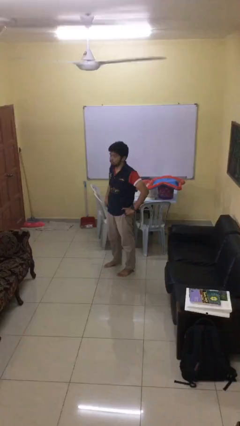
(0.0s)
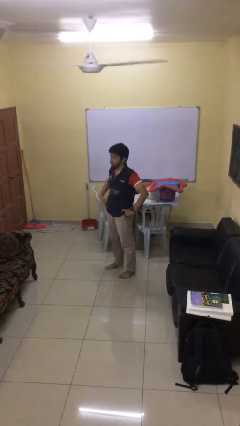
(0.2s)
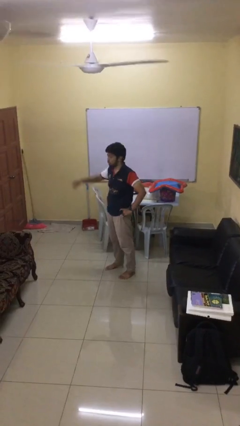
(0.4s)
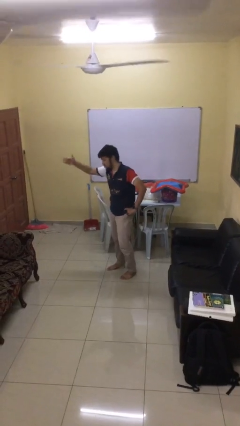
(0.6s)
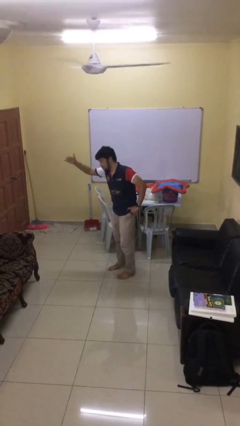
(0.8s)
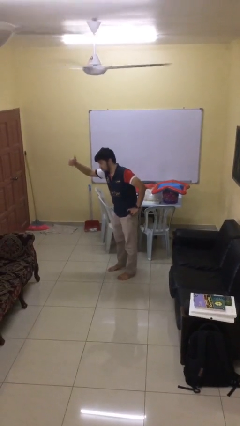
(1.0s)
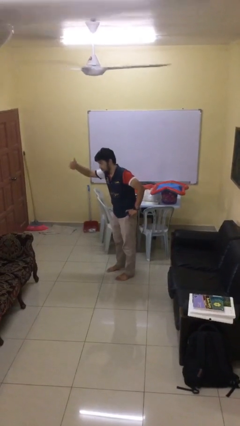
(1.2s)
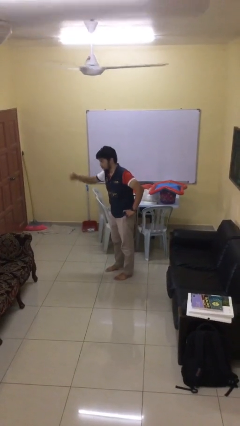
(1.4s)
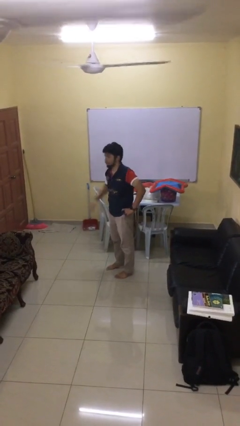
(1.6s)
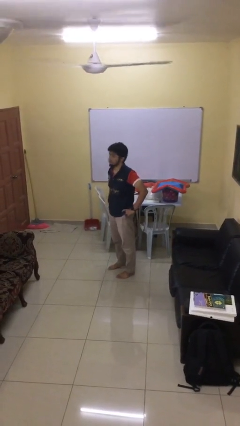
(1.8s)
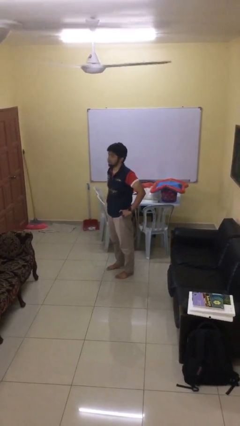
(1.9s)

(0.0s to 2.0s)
person gestures come here

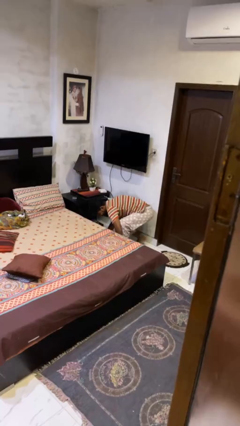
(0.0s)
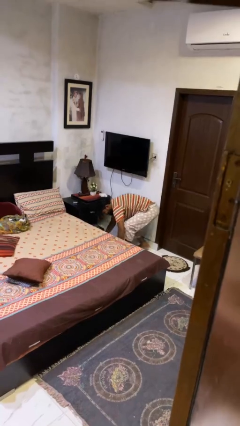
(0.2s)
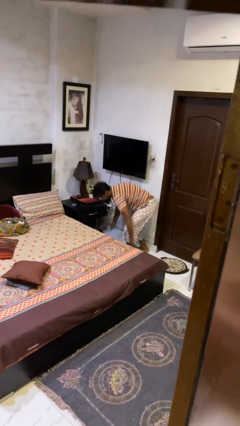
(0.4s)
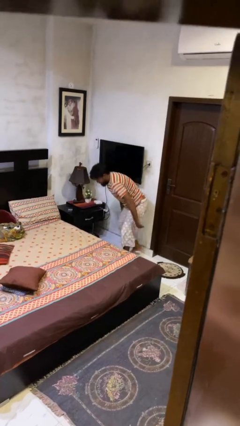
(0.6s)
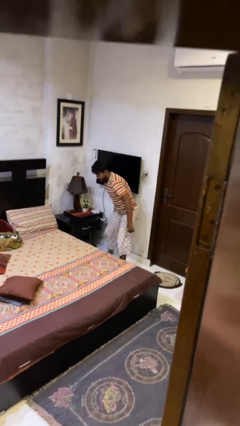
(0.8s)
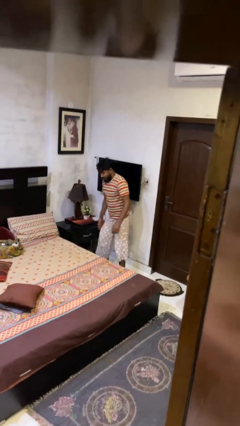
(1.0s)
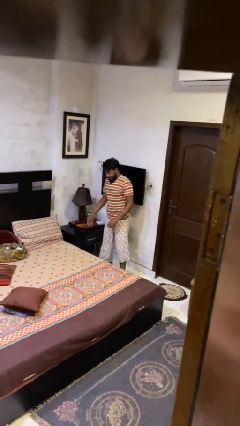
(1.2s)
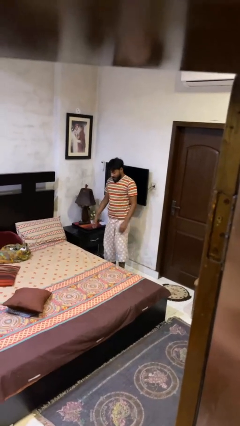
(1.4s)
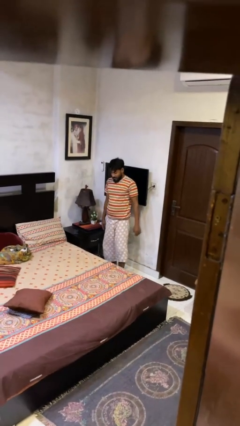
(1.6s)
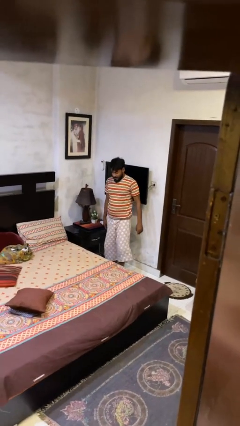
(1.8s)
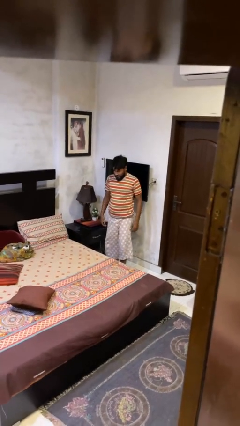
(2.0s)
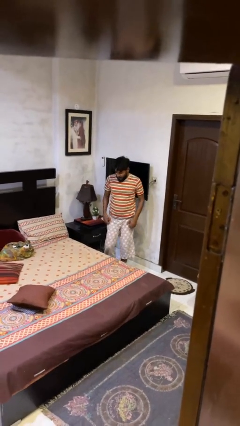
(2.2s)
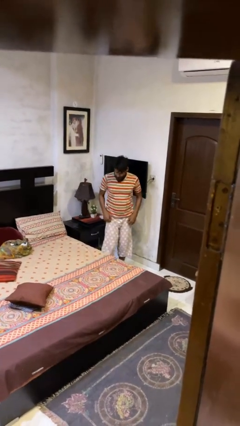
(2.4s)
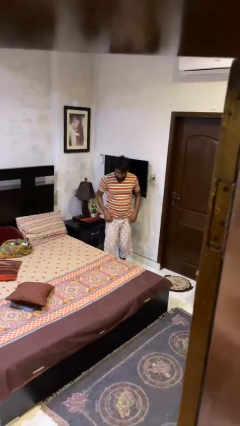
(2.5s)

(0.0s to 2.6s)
person stands up from floor

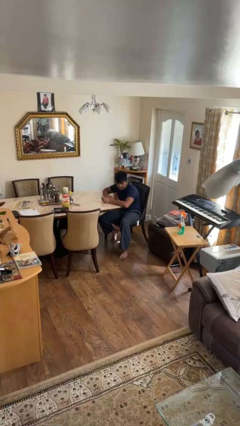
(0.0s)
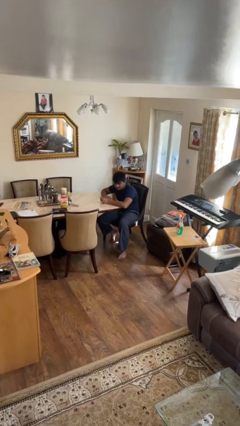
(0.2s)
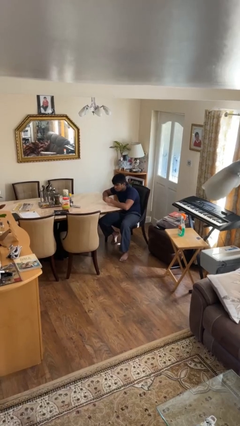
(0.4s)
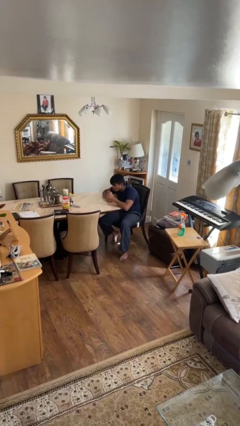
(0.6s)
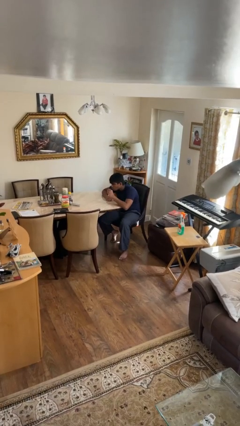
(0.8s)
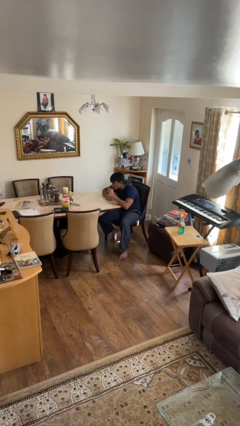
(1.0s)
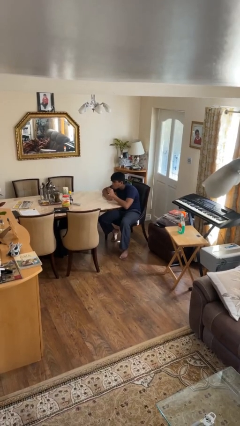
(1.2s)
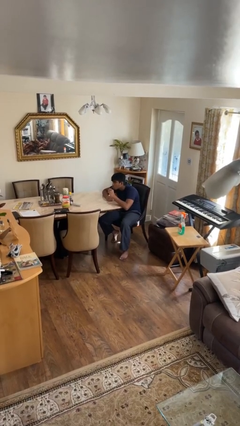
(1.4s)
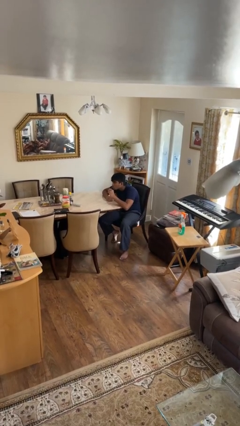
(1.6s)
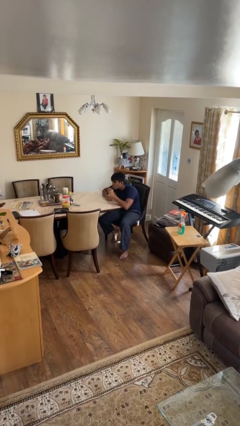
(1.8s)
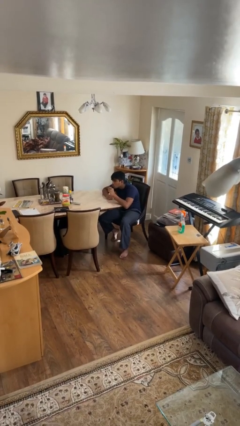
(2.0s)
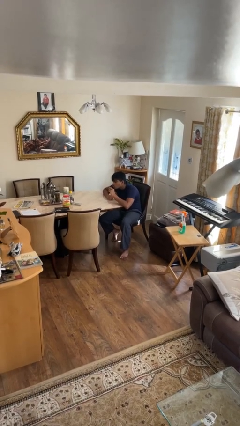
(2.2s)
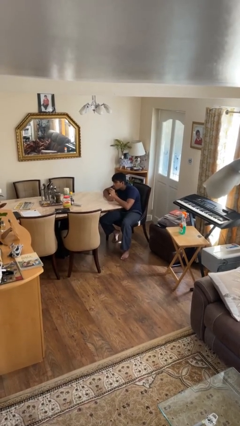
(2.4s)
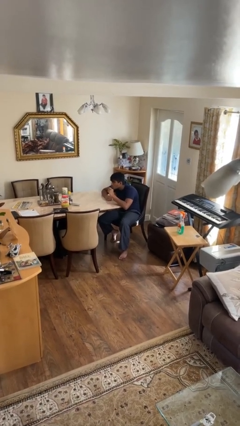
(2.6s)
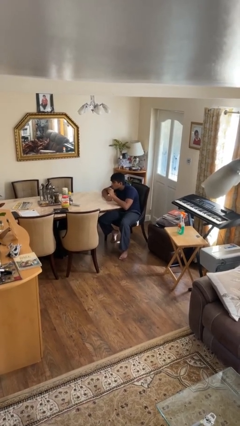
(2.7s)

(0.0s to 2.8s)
person applies lip makeup

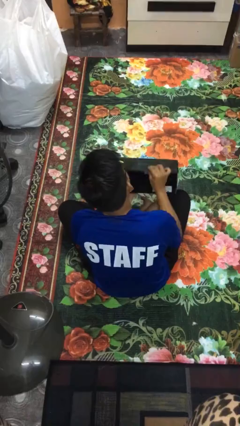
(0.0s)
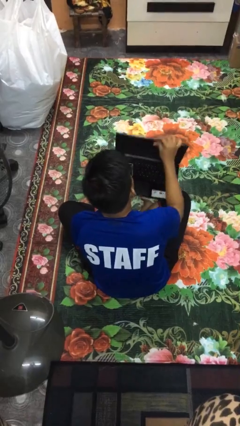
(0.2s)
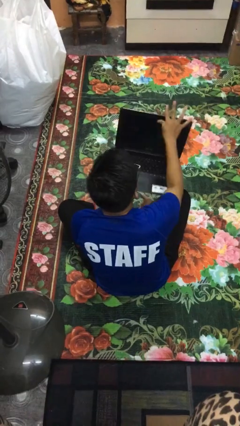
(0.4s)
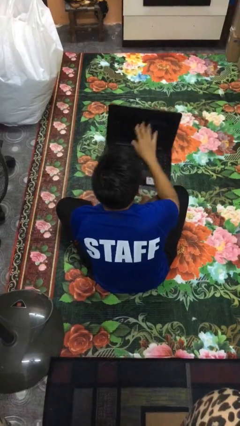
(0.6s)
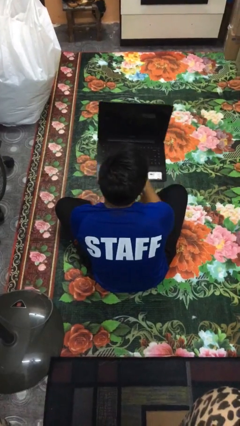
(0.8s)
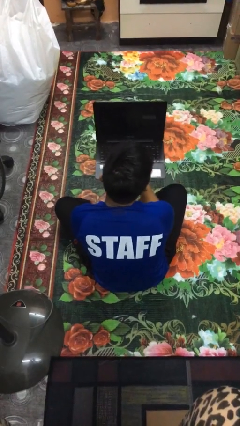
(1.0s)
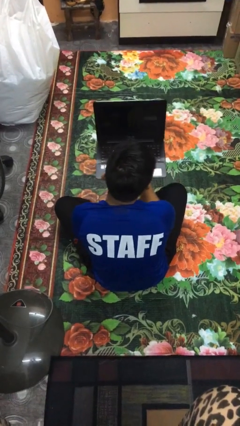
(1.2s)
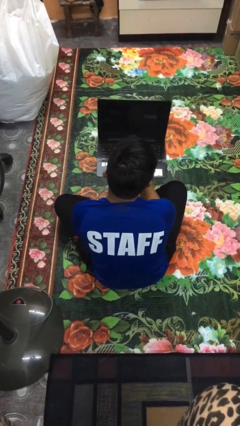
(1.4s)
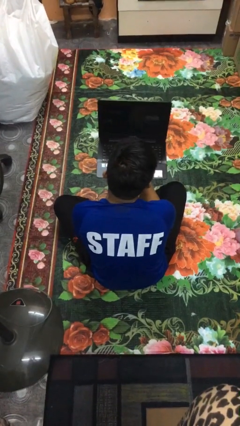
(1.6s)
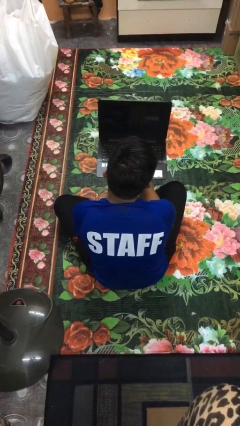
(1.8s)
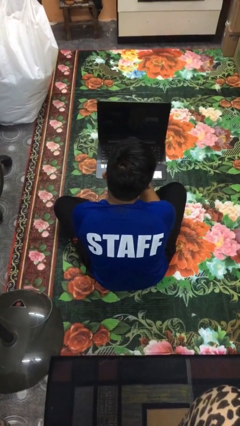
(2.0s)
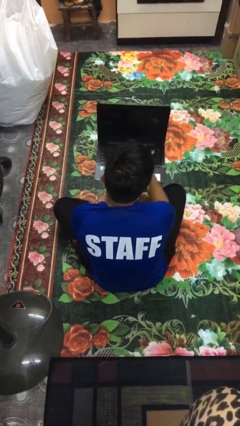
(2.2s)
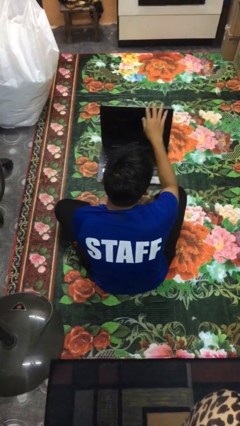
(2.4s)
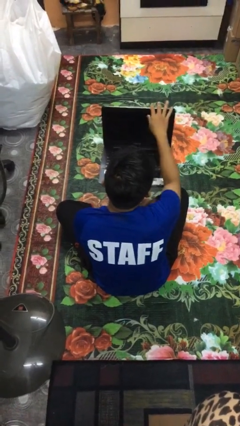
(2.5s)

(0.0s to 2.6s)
person opens laptop

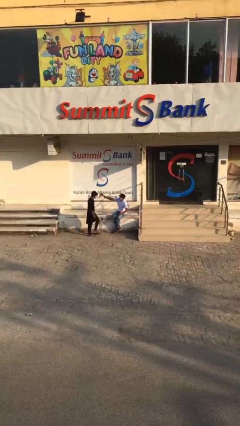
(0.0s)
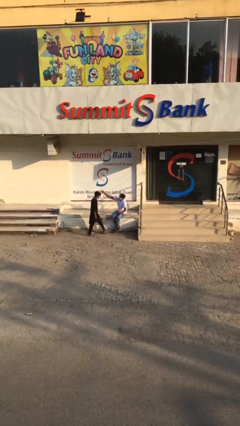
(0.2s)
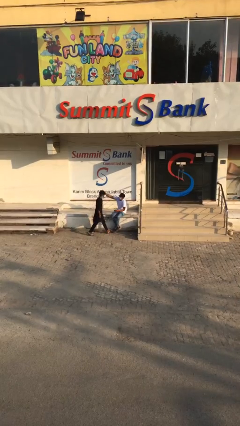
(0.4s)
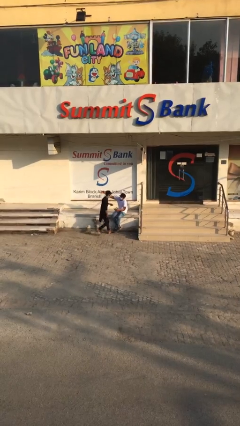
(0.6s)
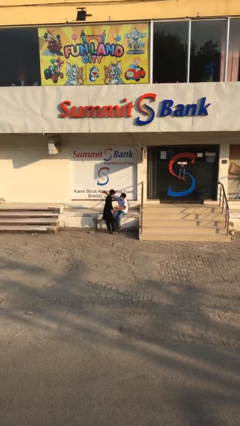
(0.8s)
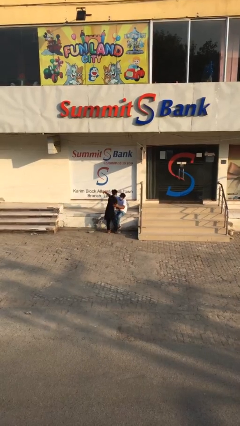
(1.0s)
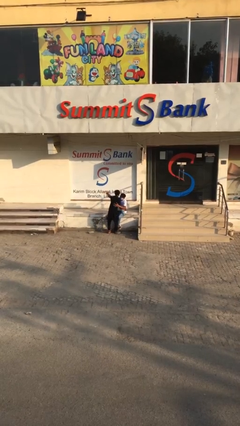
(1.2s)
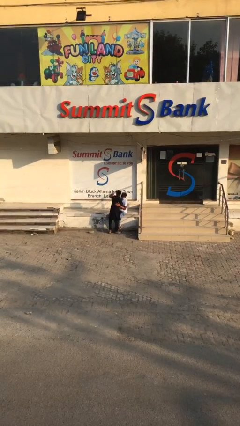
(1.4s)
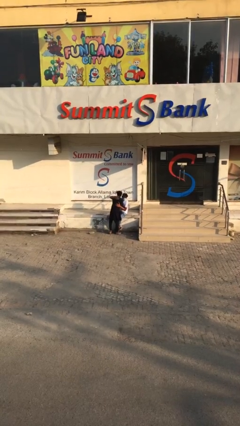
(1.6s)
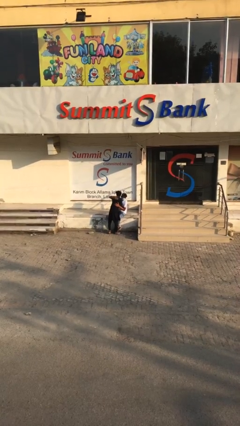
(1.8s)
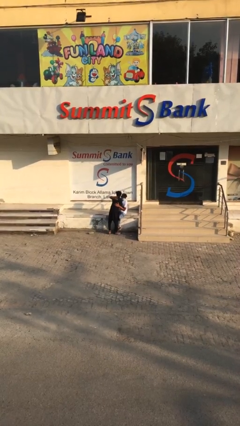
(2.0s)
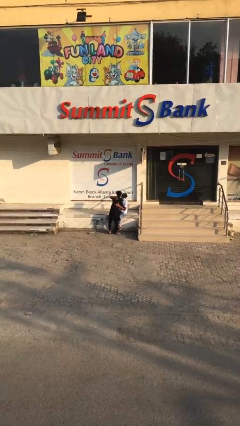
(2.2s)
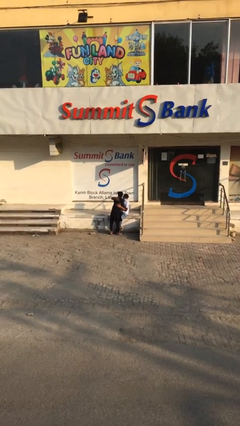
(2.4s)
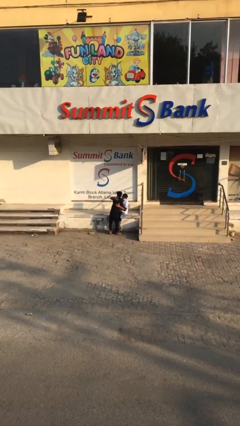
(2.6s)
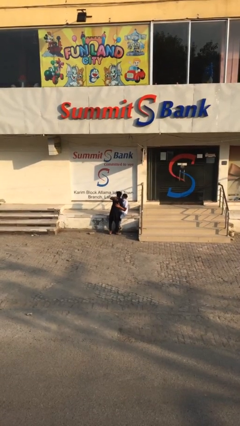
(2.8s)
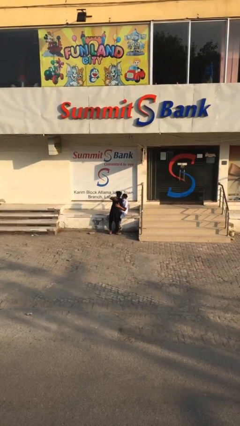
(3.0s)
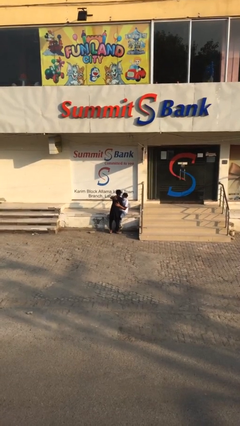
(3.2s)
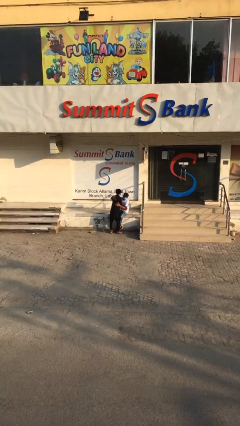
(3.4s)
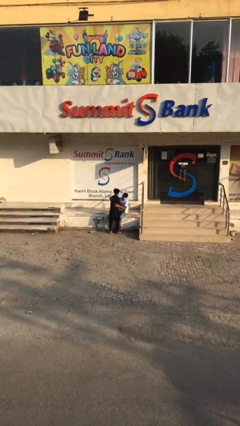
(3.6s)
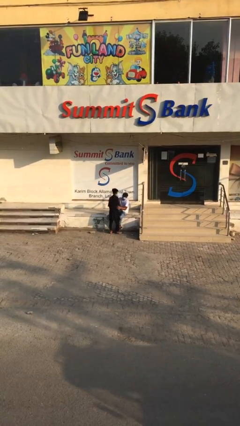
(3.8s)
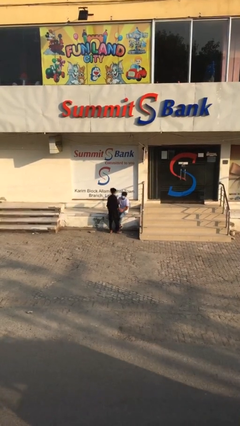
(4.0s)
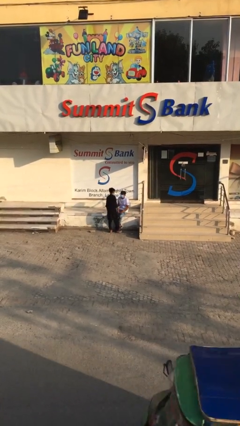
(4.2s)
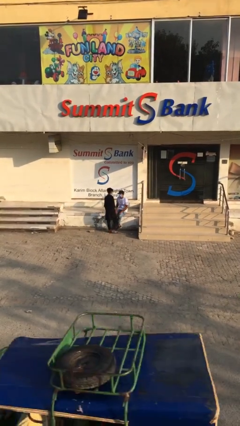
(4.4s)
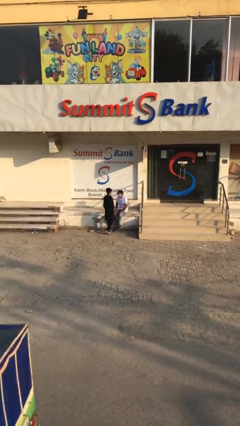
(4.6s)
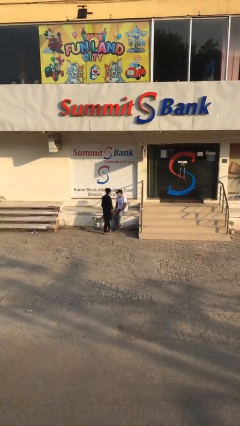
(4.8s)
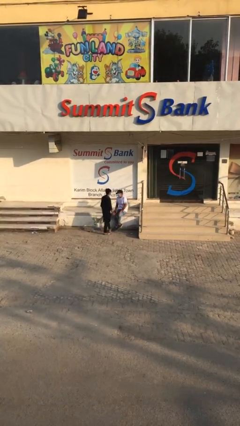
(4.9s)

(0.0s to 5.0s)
person embraces person

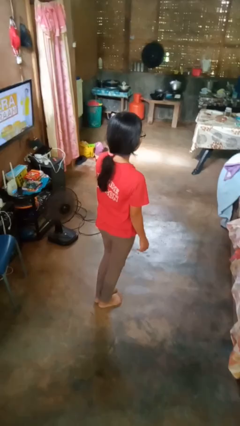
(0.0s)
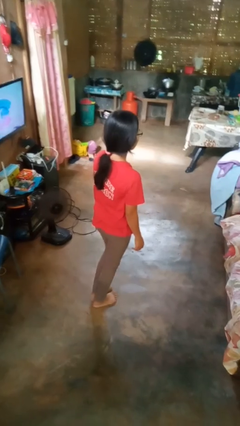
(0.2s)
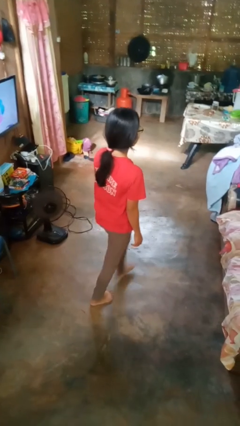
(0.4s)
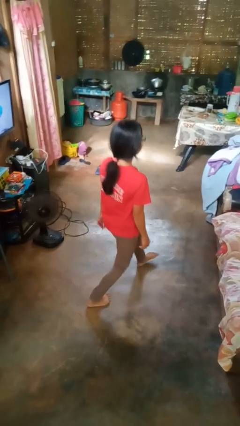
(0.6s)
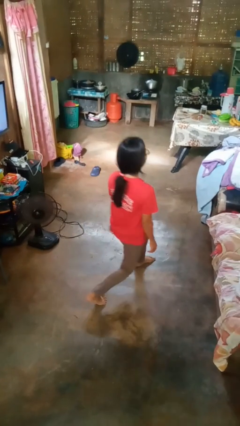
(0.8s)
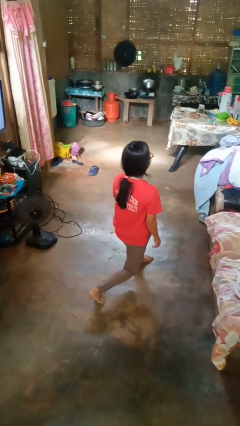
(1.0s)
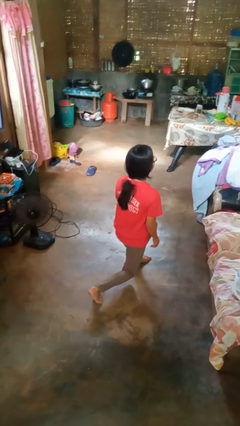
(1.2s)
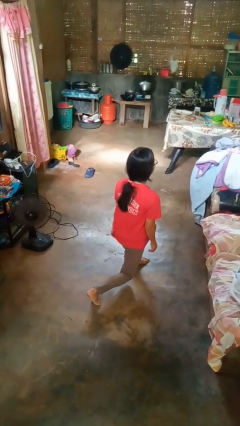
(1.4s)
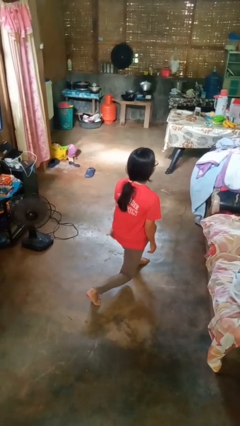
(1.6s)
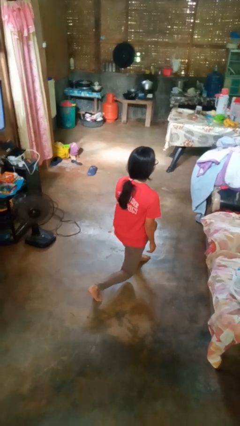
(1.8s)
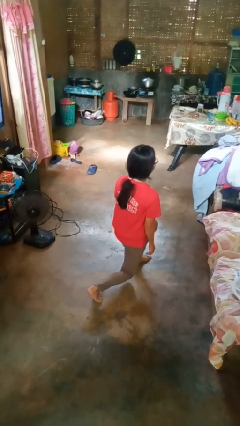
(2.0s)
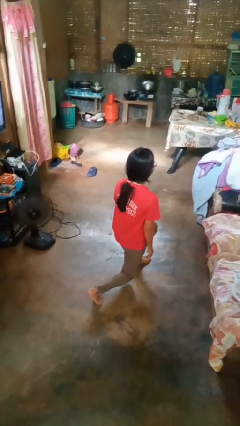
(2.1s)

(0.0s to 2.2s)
person exercises with lunges

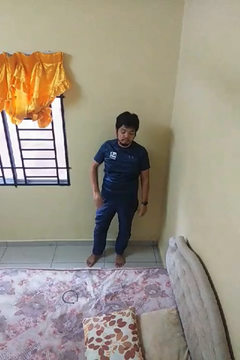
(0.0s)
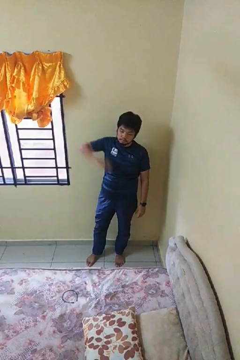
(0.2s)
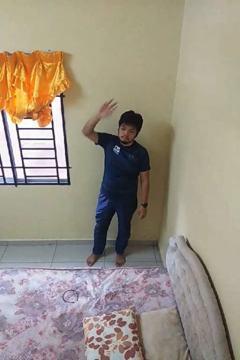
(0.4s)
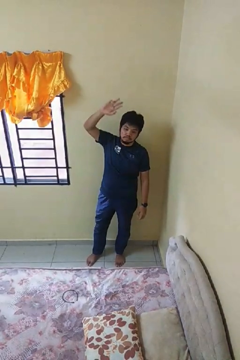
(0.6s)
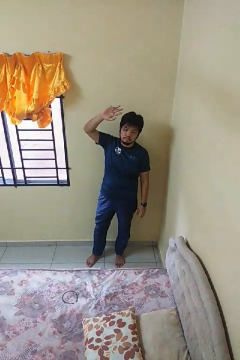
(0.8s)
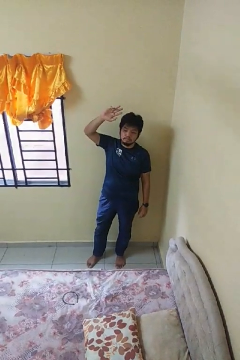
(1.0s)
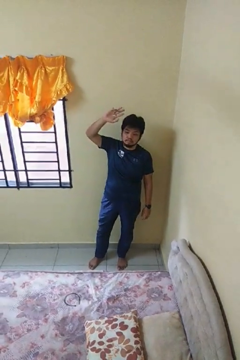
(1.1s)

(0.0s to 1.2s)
person gestures swipe up
